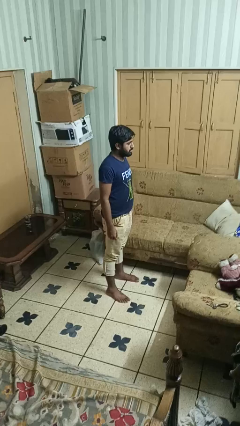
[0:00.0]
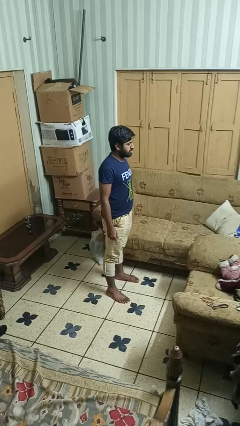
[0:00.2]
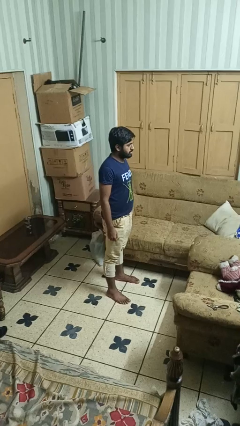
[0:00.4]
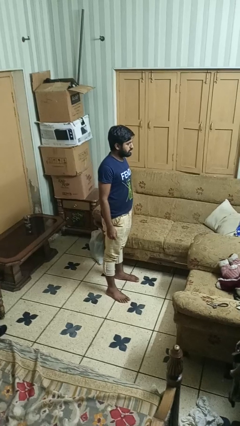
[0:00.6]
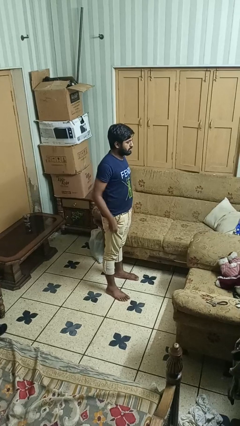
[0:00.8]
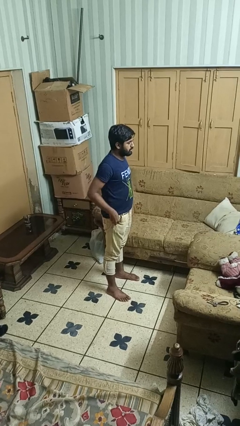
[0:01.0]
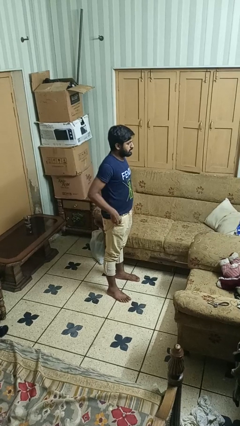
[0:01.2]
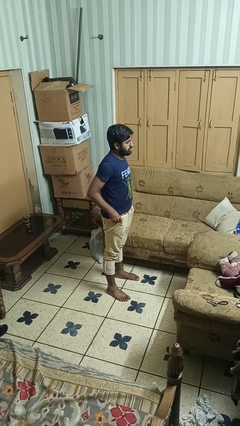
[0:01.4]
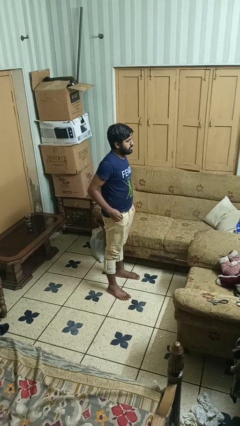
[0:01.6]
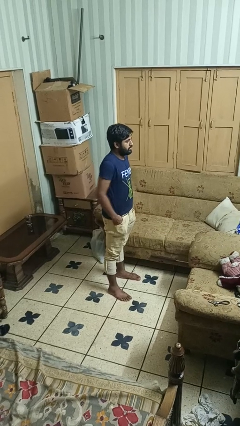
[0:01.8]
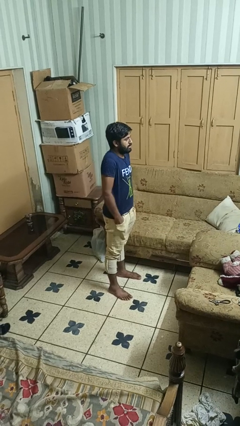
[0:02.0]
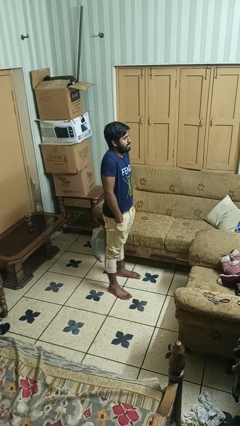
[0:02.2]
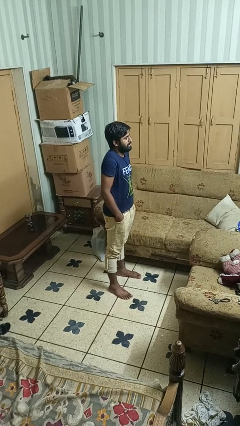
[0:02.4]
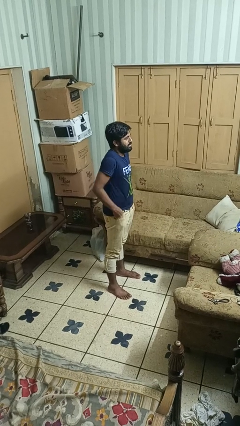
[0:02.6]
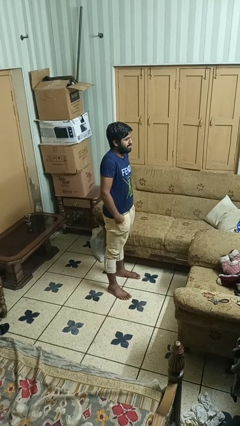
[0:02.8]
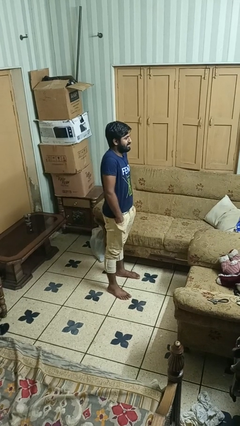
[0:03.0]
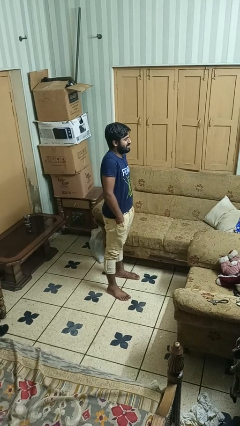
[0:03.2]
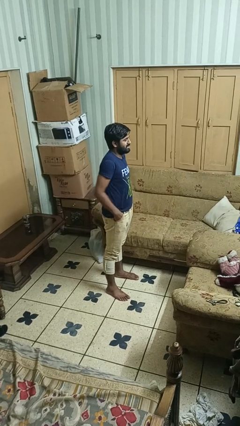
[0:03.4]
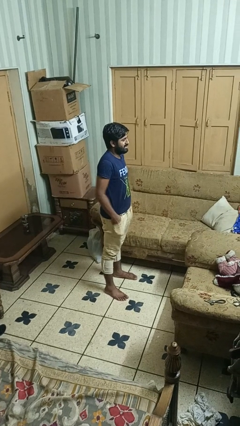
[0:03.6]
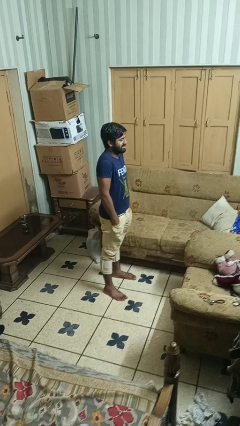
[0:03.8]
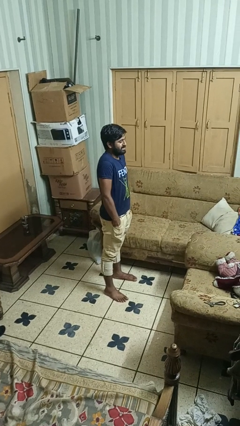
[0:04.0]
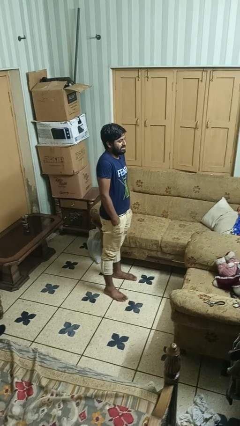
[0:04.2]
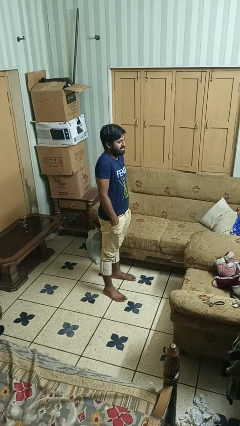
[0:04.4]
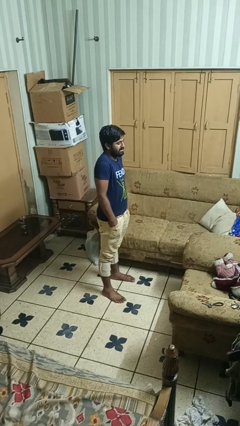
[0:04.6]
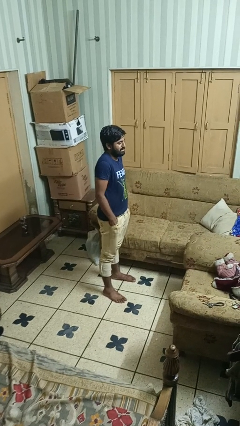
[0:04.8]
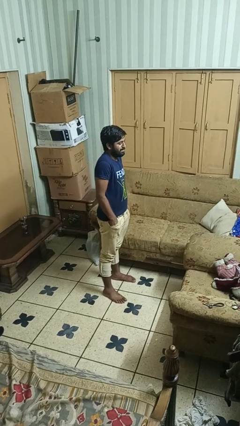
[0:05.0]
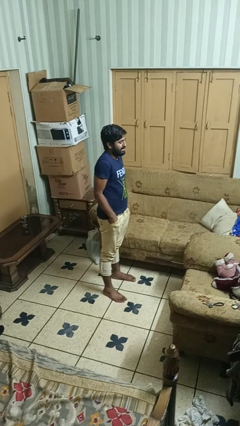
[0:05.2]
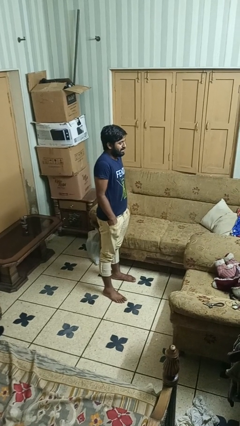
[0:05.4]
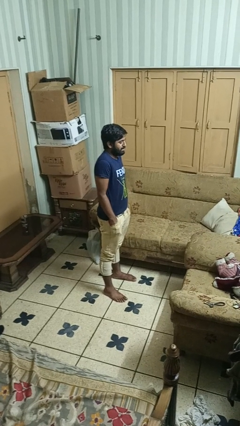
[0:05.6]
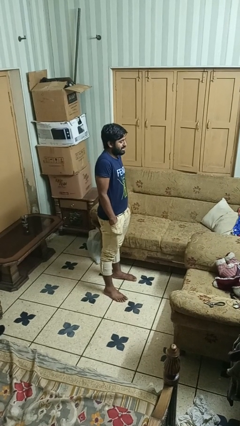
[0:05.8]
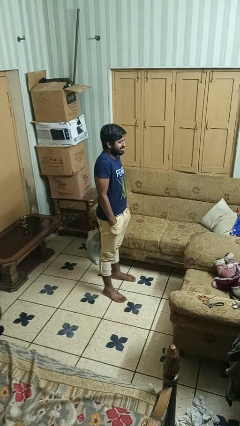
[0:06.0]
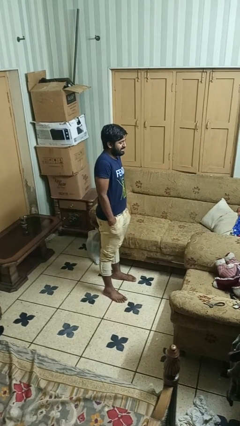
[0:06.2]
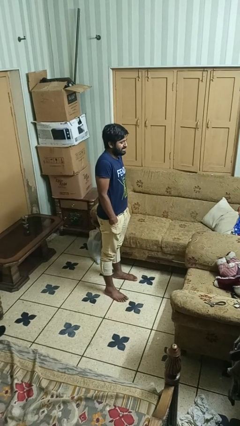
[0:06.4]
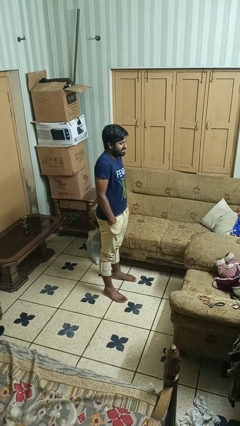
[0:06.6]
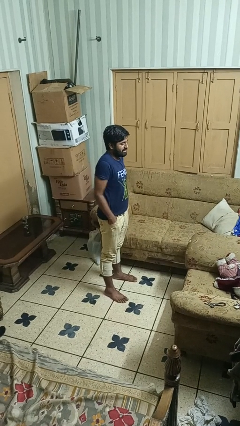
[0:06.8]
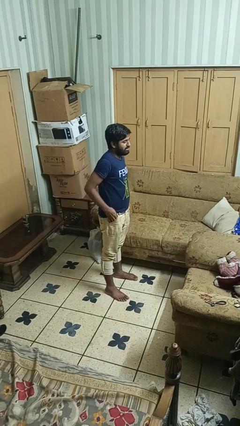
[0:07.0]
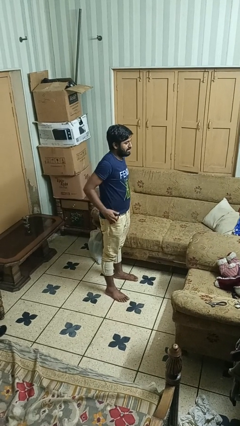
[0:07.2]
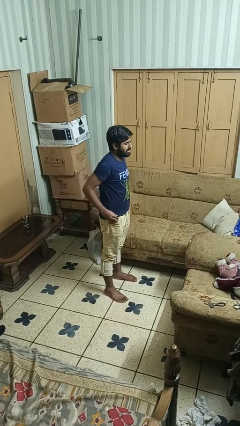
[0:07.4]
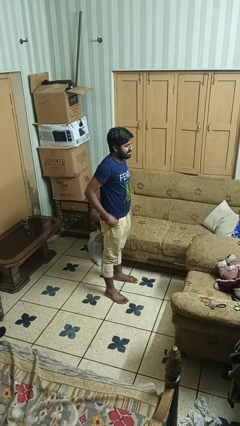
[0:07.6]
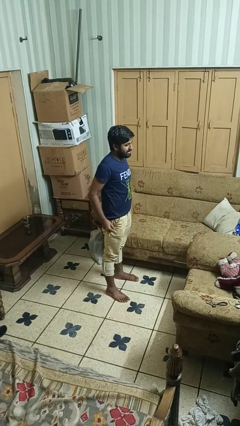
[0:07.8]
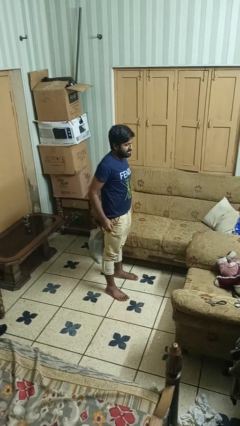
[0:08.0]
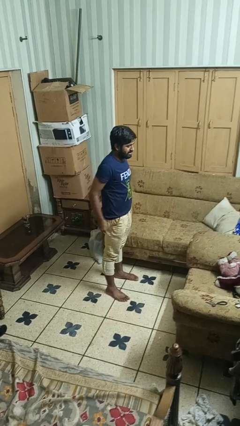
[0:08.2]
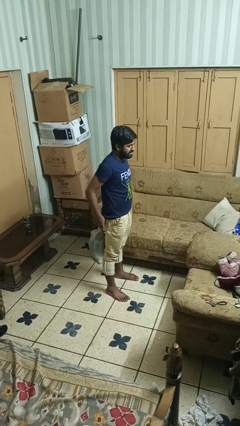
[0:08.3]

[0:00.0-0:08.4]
person puts hands in back pockets

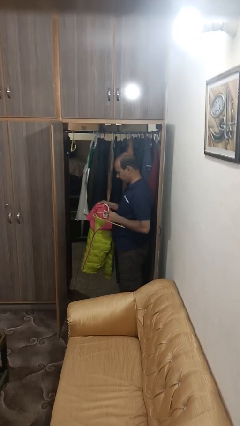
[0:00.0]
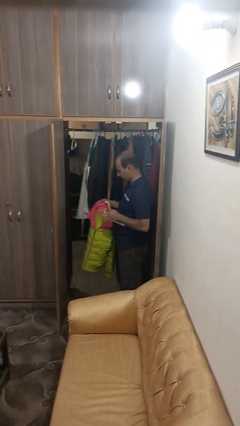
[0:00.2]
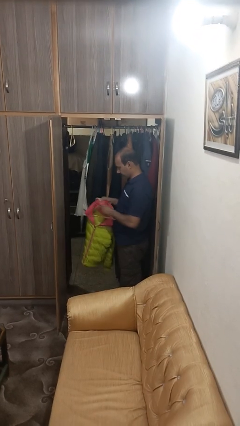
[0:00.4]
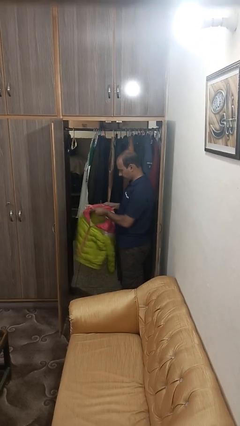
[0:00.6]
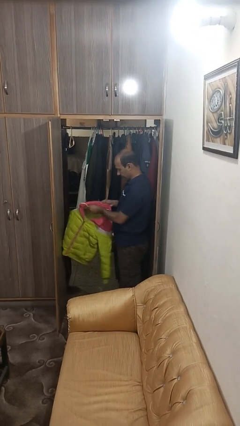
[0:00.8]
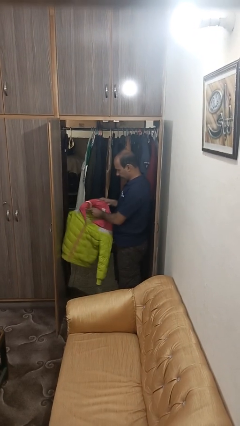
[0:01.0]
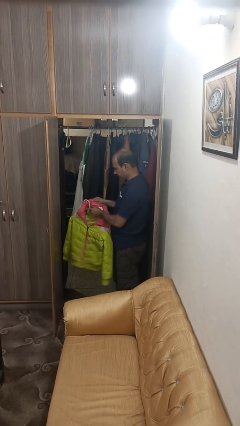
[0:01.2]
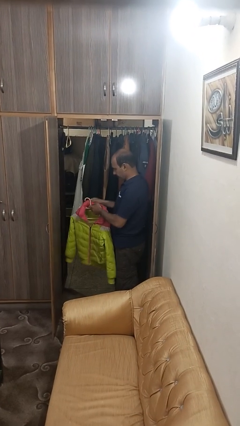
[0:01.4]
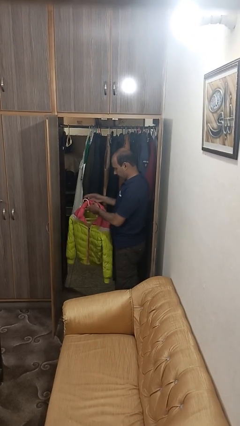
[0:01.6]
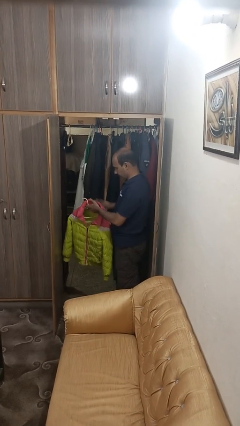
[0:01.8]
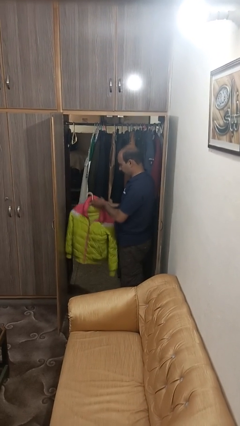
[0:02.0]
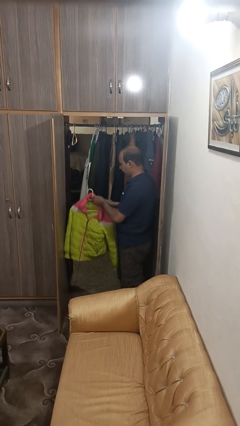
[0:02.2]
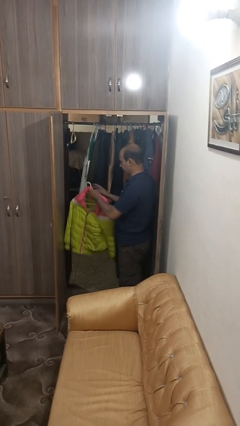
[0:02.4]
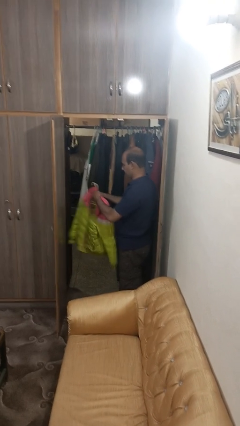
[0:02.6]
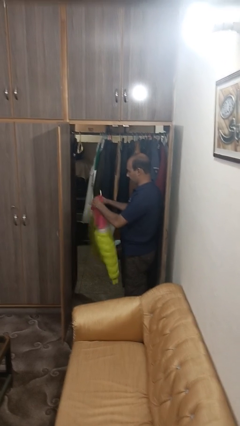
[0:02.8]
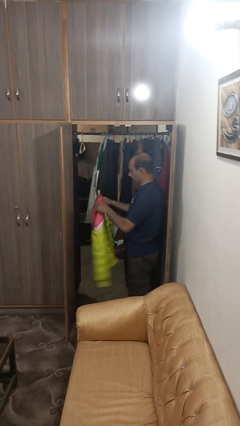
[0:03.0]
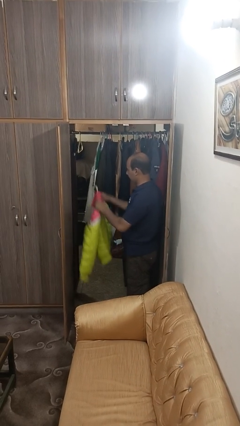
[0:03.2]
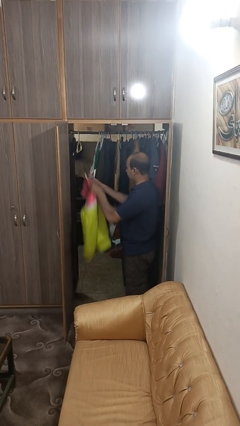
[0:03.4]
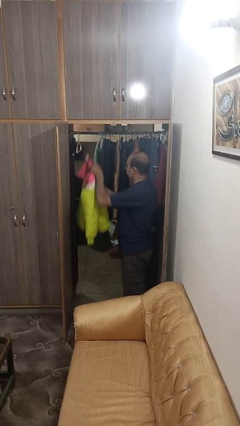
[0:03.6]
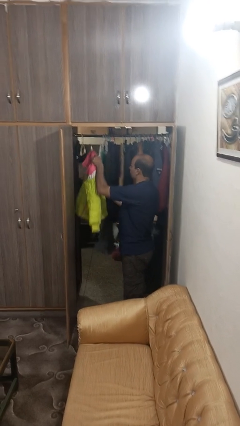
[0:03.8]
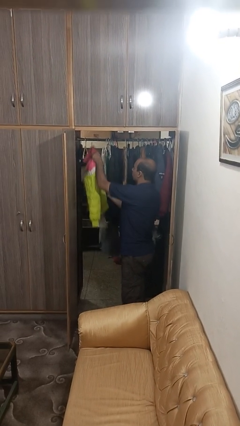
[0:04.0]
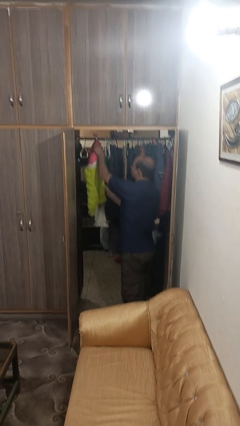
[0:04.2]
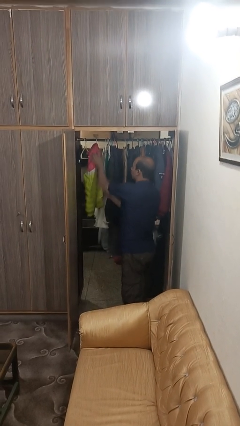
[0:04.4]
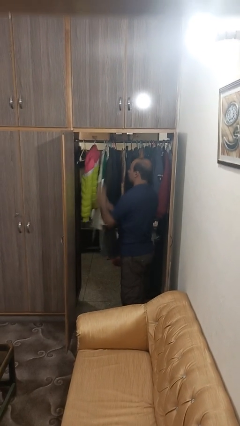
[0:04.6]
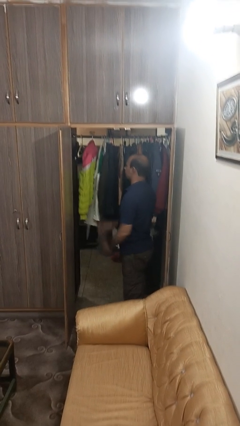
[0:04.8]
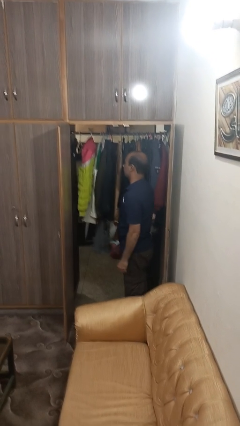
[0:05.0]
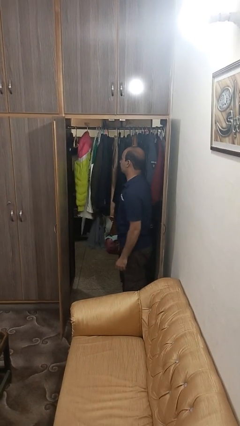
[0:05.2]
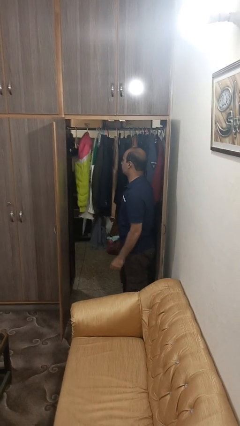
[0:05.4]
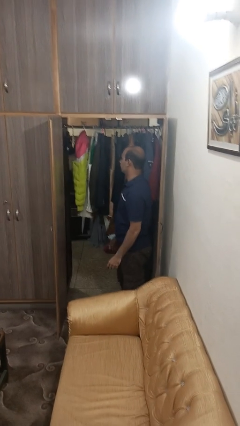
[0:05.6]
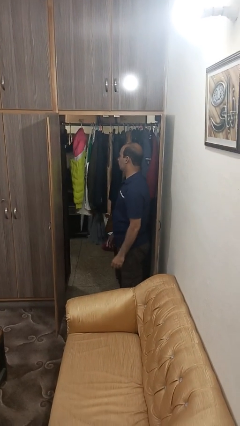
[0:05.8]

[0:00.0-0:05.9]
person puts clothes into closet

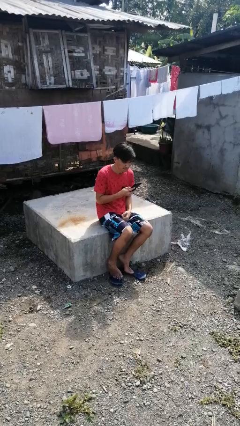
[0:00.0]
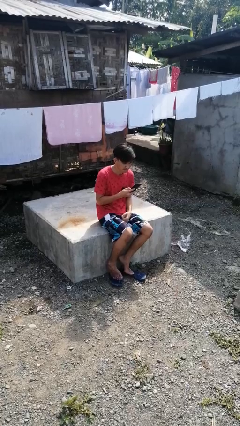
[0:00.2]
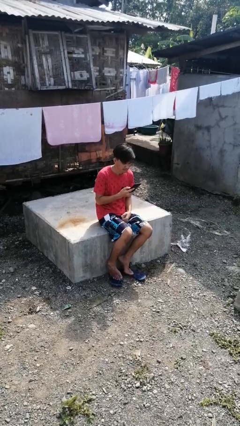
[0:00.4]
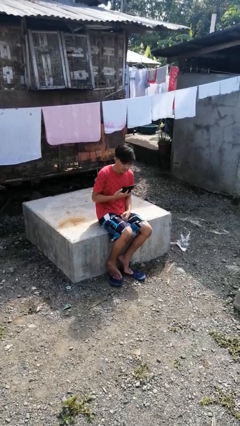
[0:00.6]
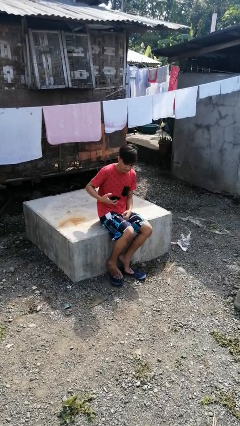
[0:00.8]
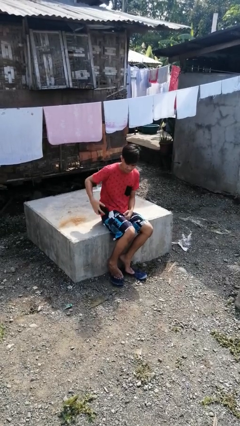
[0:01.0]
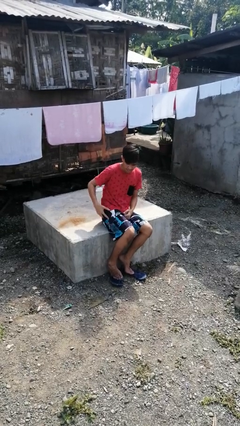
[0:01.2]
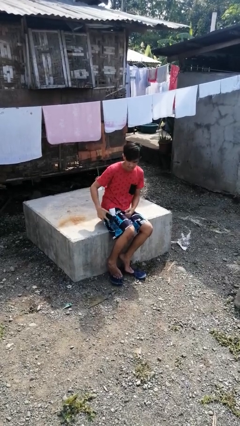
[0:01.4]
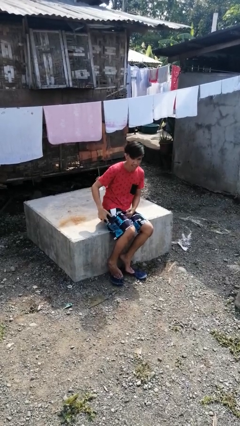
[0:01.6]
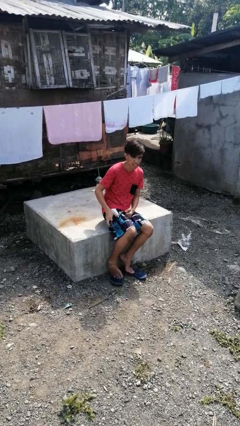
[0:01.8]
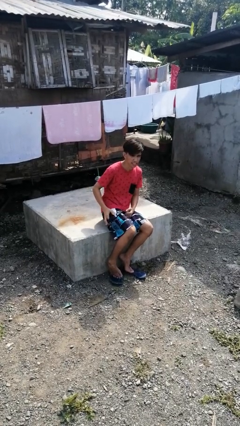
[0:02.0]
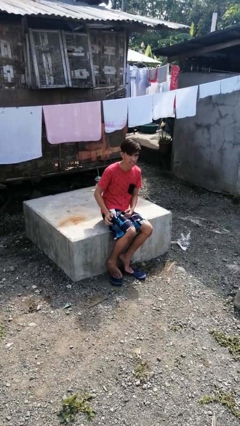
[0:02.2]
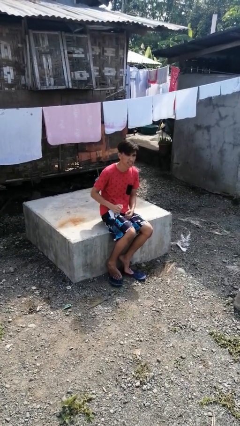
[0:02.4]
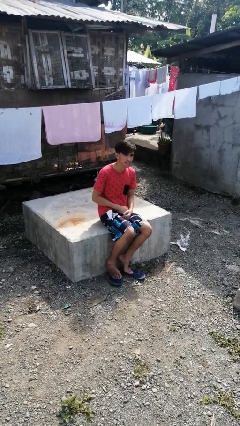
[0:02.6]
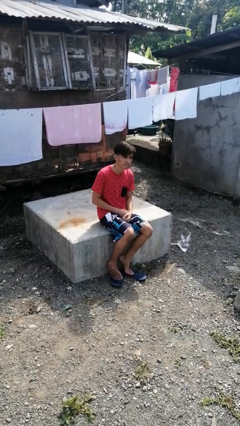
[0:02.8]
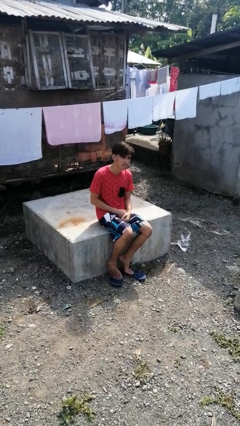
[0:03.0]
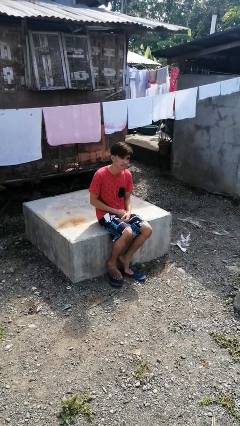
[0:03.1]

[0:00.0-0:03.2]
person puts phone into pocket

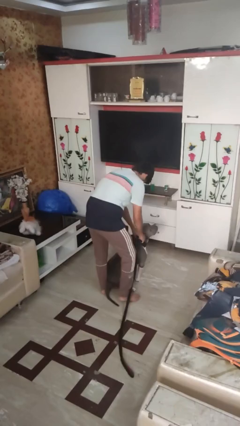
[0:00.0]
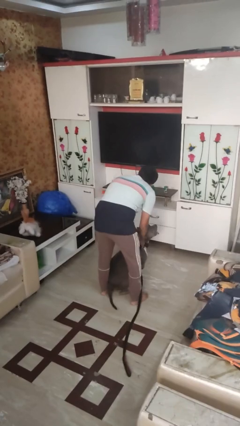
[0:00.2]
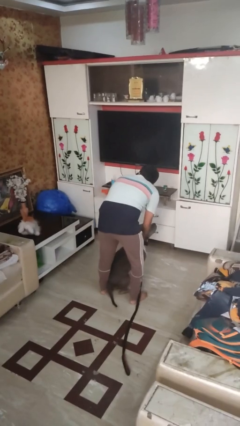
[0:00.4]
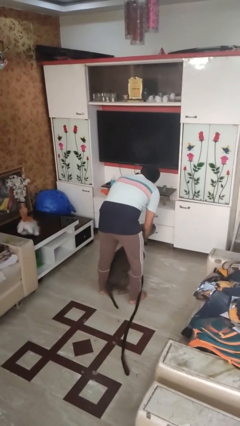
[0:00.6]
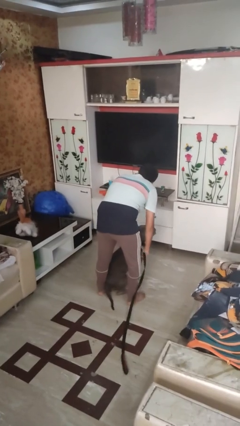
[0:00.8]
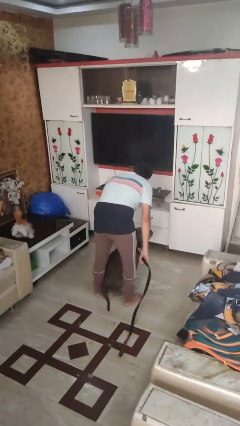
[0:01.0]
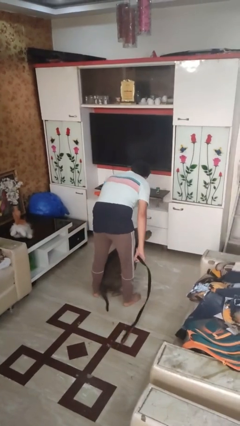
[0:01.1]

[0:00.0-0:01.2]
person attaches leash to dog
